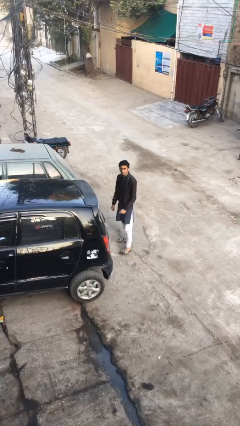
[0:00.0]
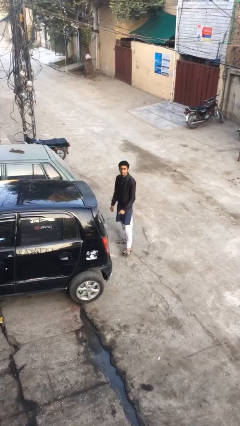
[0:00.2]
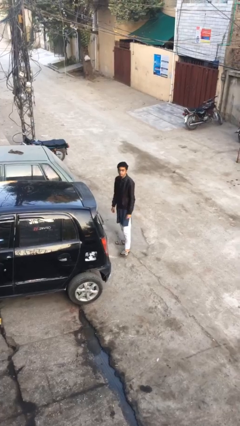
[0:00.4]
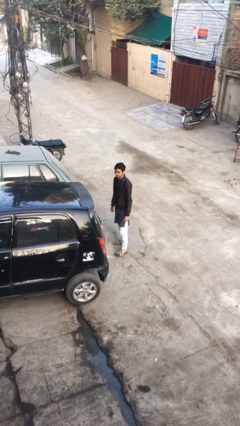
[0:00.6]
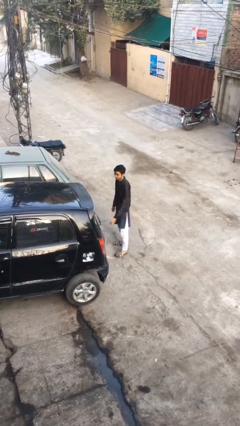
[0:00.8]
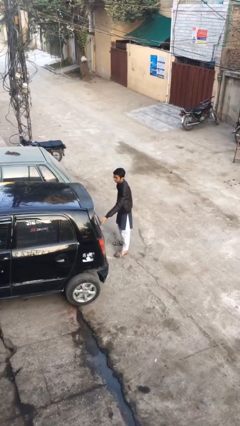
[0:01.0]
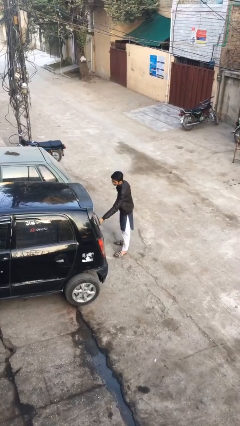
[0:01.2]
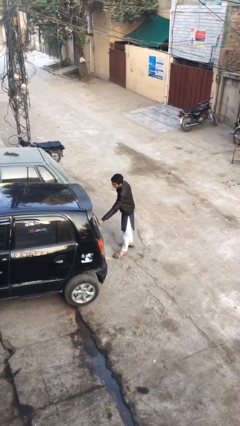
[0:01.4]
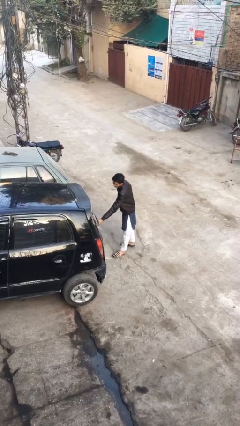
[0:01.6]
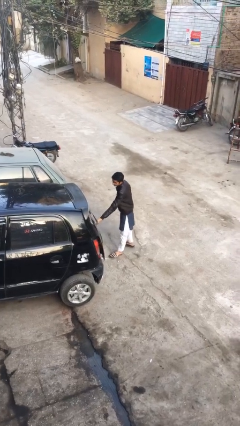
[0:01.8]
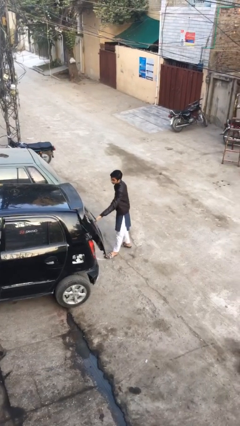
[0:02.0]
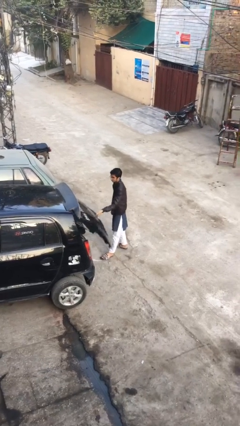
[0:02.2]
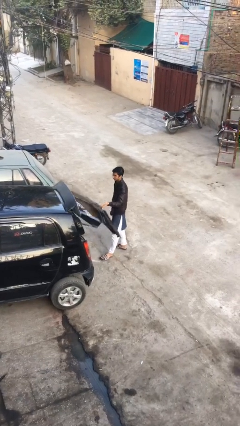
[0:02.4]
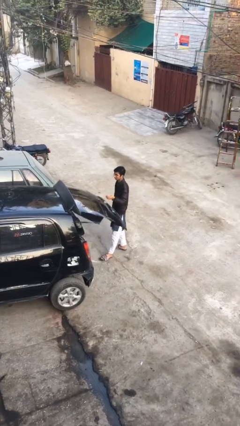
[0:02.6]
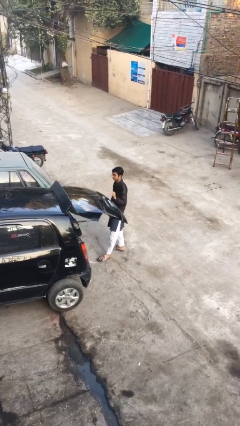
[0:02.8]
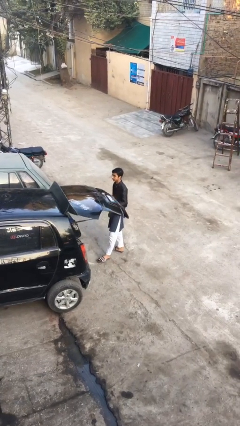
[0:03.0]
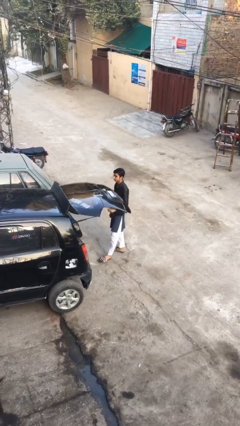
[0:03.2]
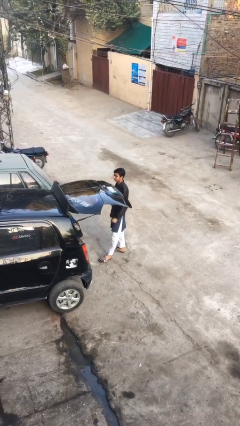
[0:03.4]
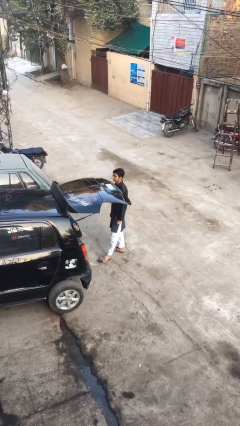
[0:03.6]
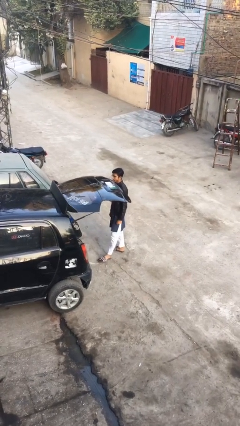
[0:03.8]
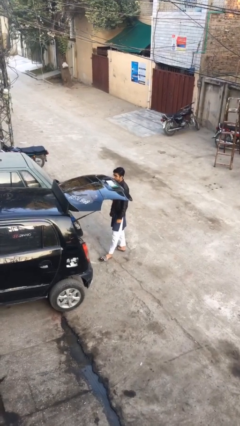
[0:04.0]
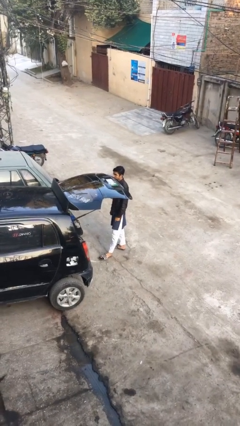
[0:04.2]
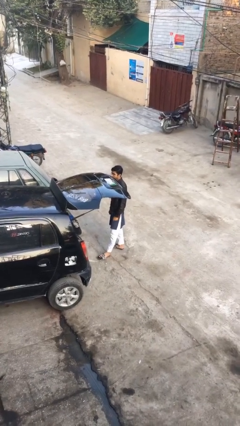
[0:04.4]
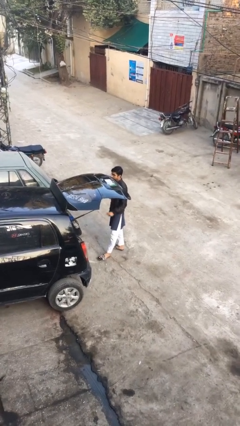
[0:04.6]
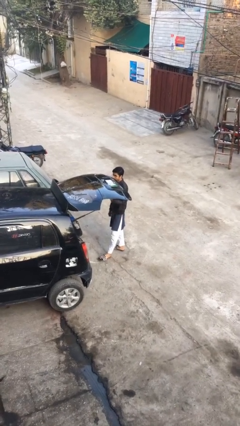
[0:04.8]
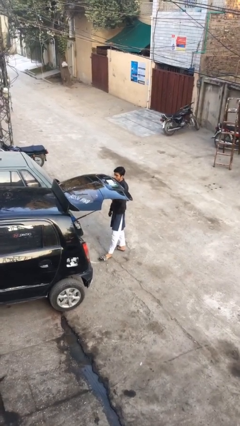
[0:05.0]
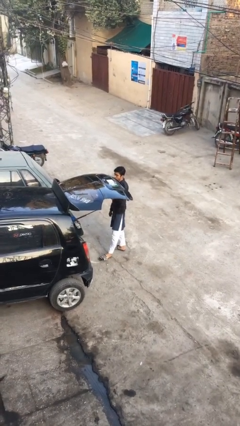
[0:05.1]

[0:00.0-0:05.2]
person opens car trunk

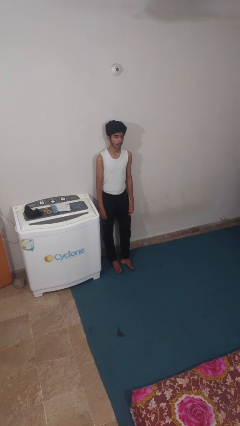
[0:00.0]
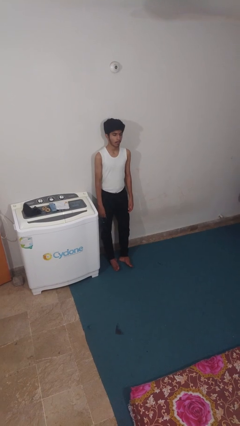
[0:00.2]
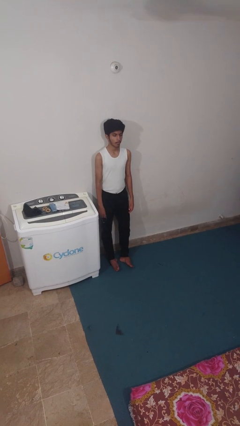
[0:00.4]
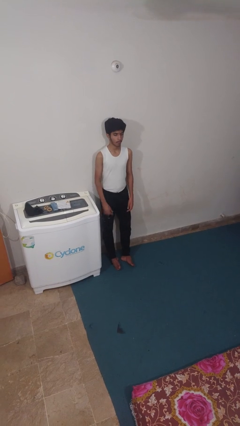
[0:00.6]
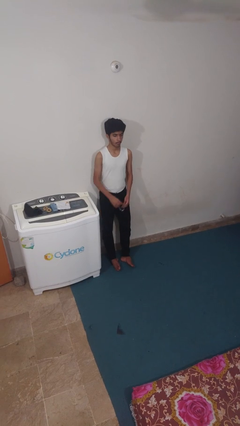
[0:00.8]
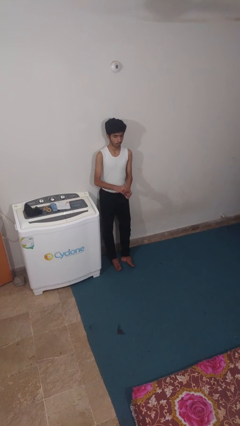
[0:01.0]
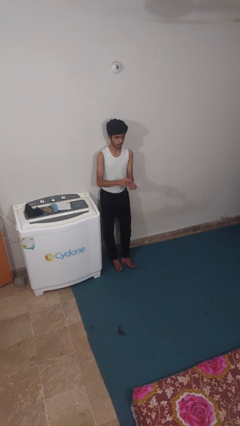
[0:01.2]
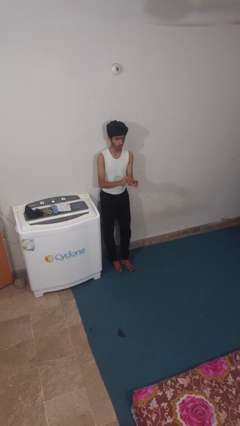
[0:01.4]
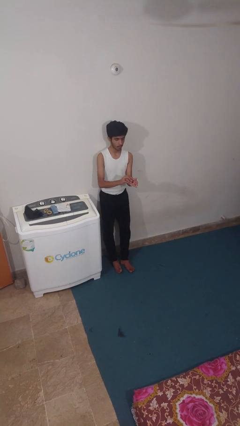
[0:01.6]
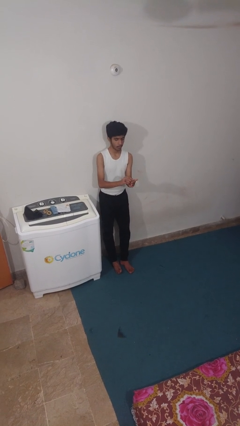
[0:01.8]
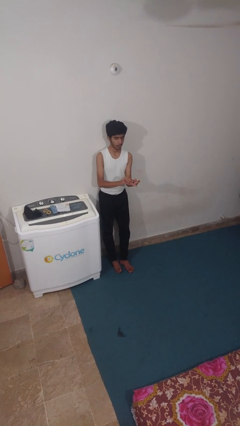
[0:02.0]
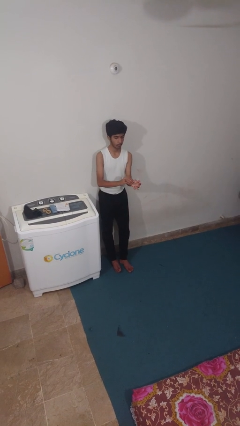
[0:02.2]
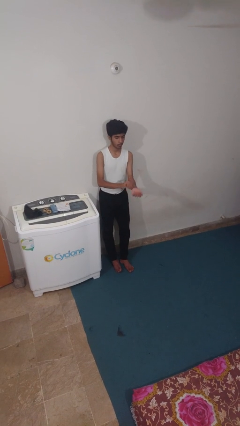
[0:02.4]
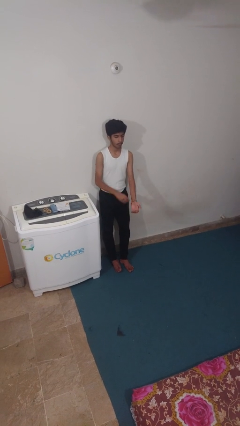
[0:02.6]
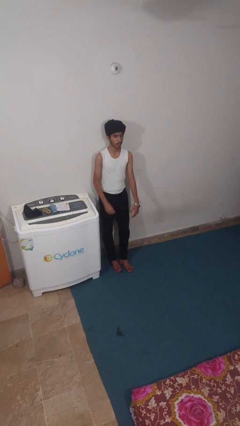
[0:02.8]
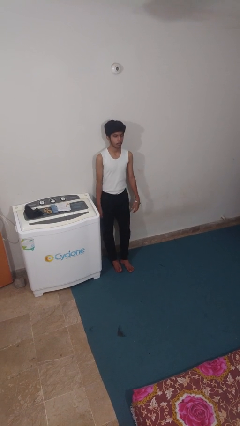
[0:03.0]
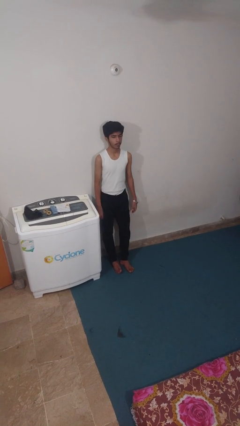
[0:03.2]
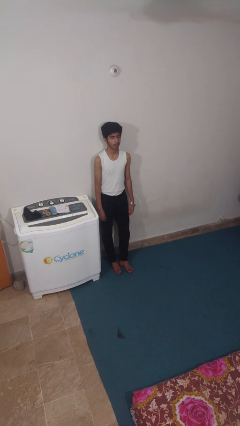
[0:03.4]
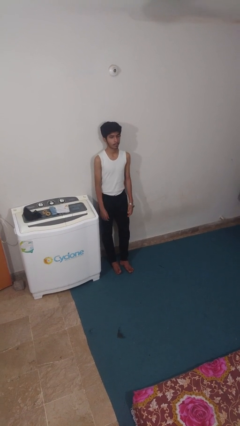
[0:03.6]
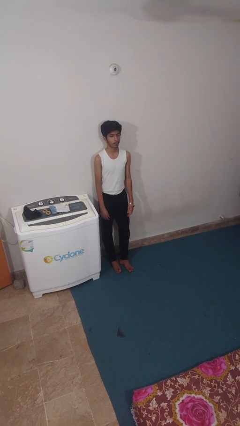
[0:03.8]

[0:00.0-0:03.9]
person puts on wristwatch

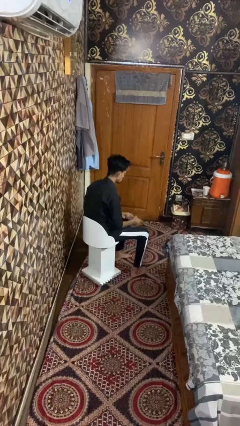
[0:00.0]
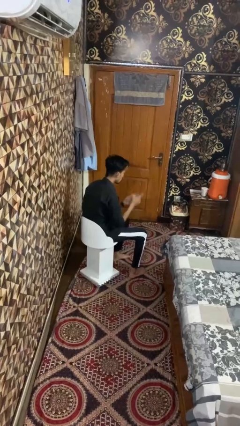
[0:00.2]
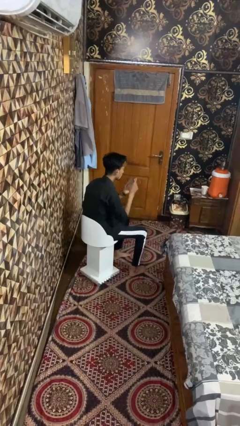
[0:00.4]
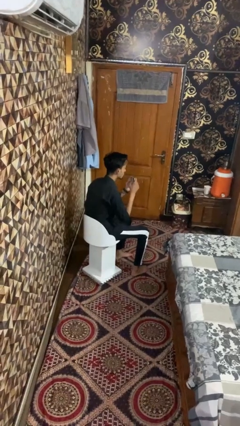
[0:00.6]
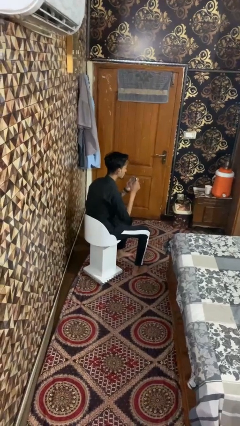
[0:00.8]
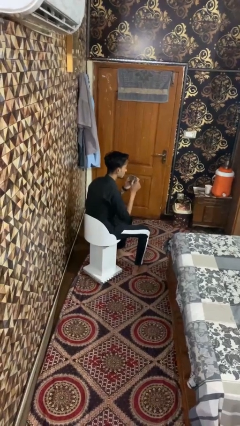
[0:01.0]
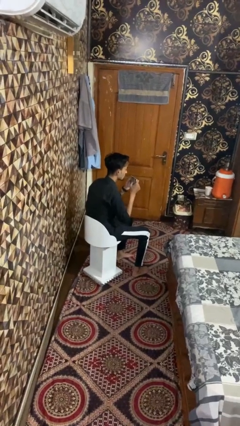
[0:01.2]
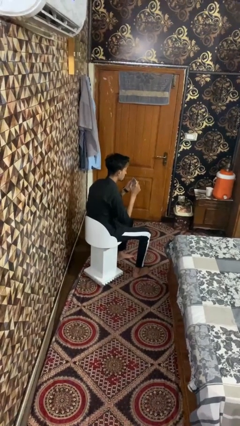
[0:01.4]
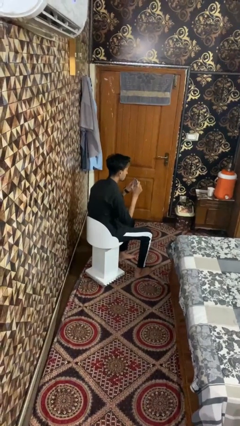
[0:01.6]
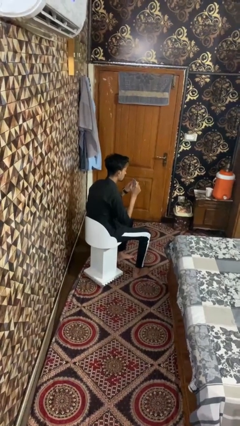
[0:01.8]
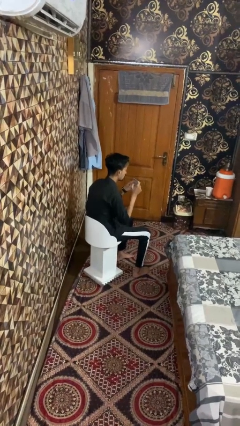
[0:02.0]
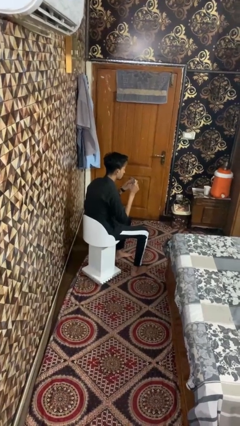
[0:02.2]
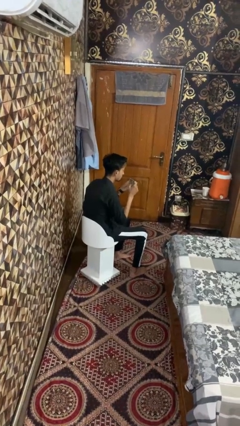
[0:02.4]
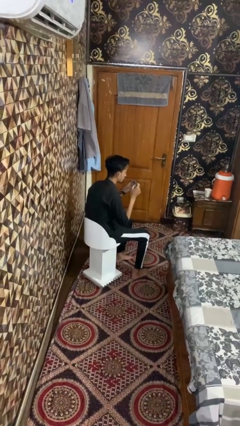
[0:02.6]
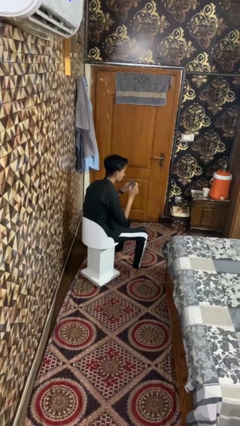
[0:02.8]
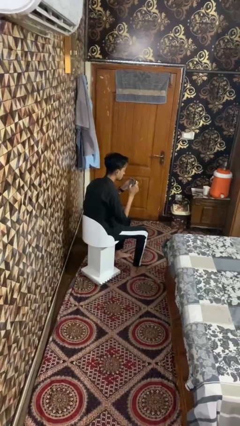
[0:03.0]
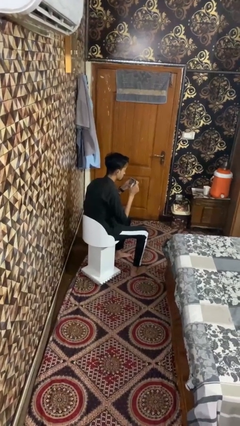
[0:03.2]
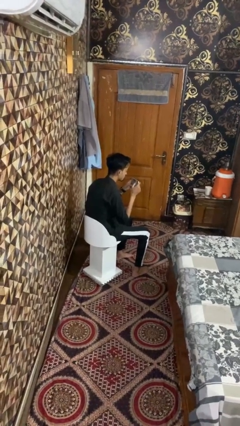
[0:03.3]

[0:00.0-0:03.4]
person interacts with tablet

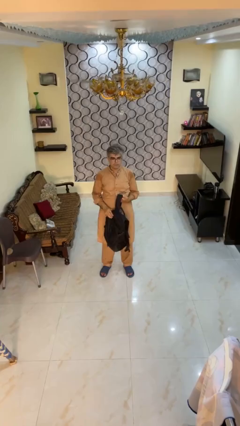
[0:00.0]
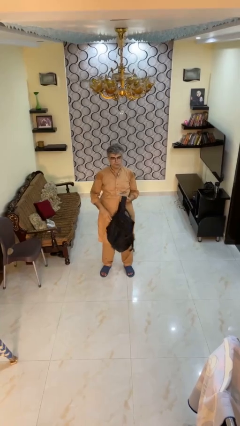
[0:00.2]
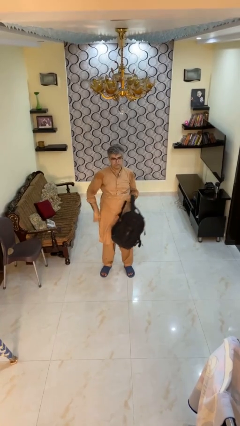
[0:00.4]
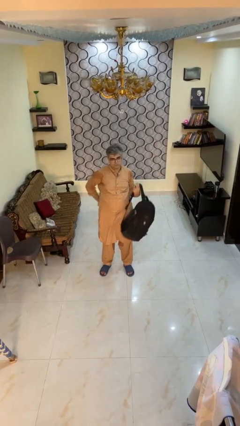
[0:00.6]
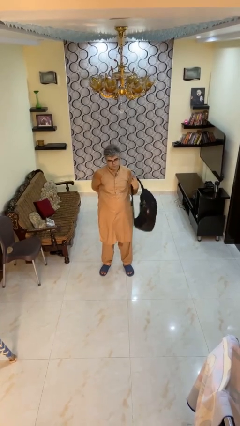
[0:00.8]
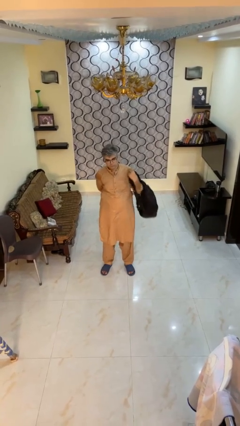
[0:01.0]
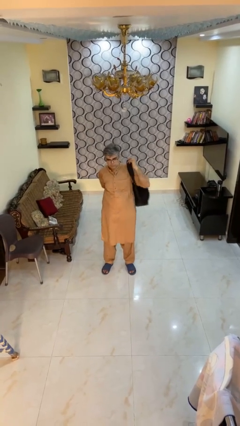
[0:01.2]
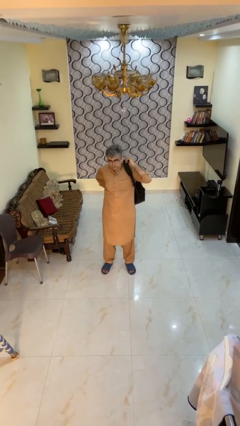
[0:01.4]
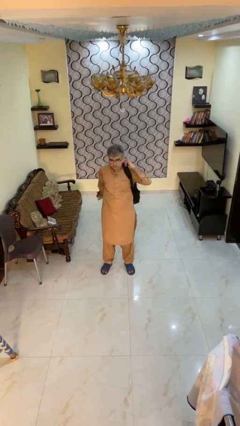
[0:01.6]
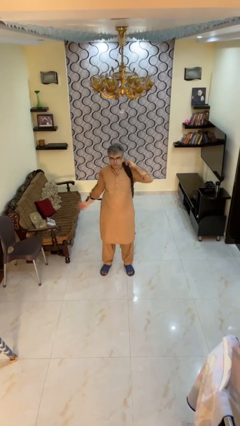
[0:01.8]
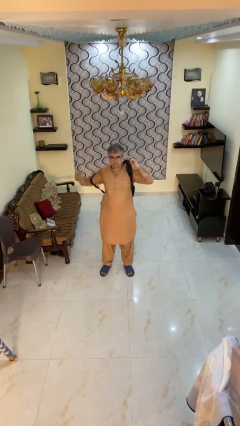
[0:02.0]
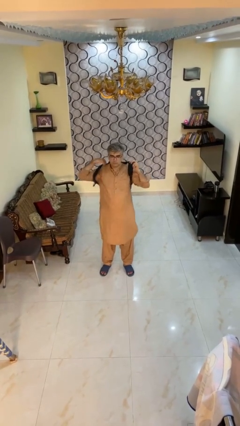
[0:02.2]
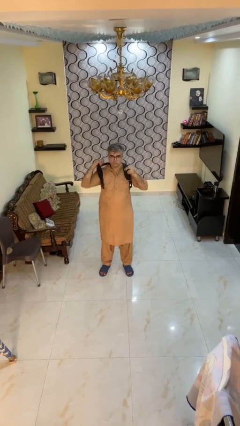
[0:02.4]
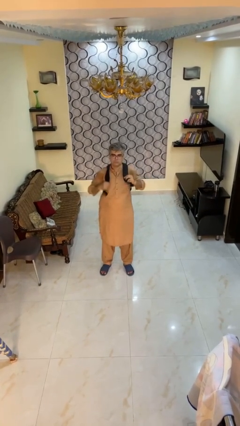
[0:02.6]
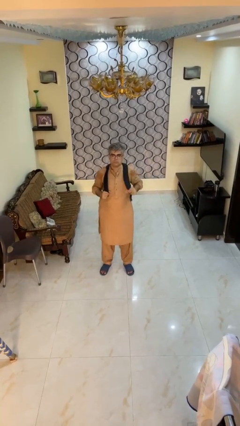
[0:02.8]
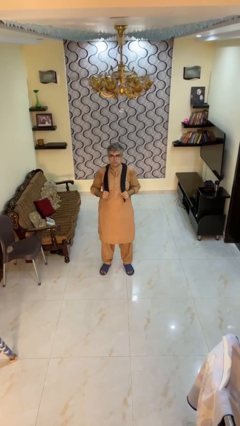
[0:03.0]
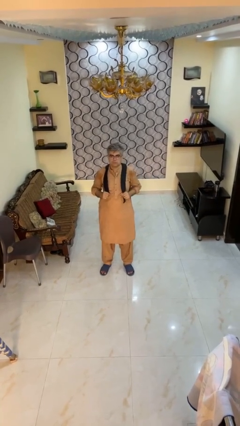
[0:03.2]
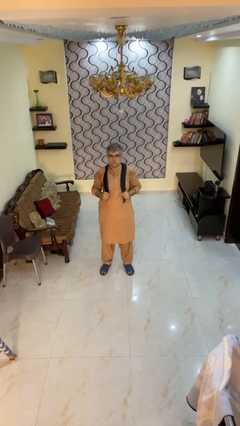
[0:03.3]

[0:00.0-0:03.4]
person puts on backpack

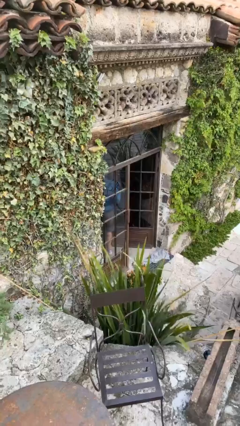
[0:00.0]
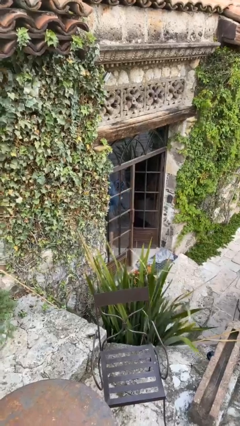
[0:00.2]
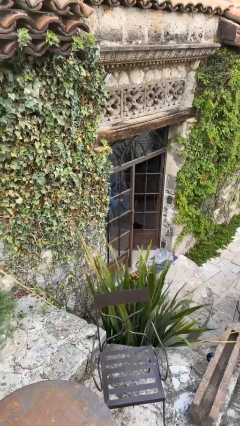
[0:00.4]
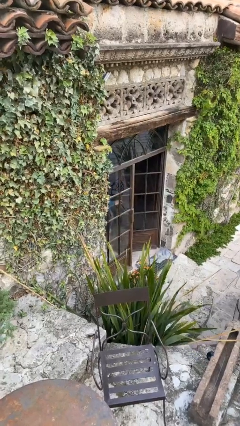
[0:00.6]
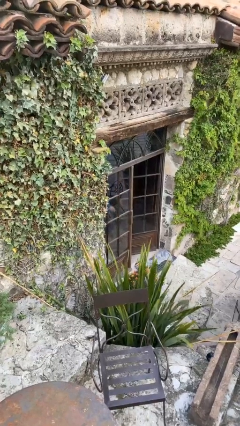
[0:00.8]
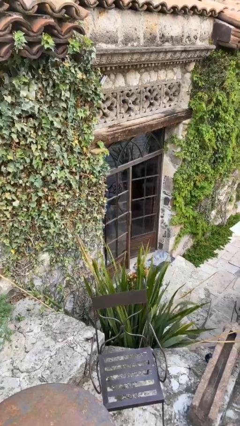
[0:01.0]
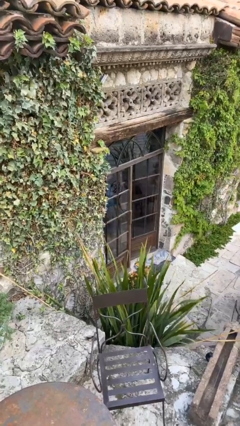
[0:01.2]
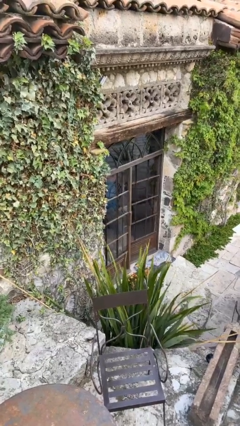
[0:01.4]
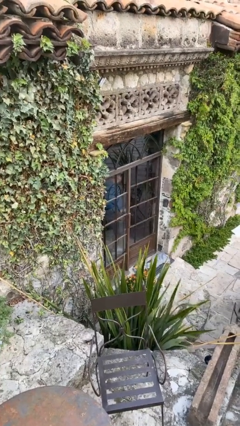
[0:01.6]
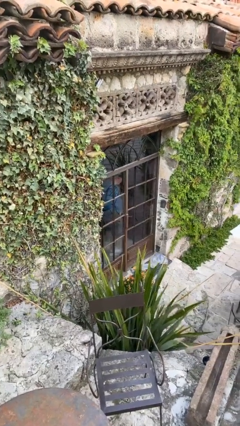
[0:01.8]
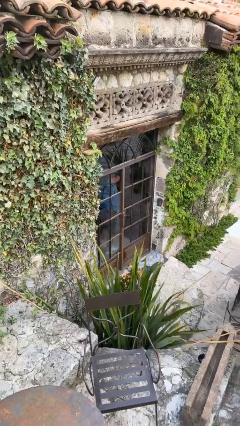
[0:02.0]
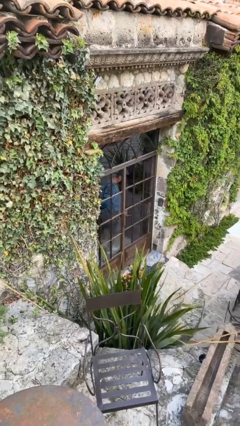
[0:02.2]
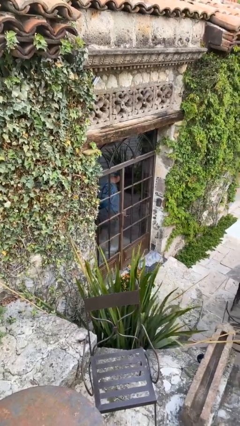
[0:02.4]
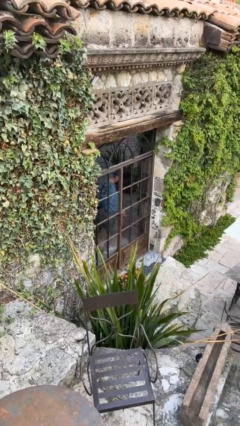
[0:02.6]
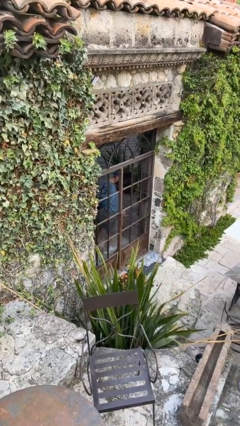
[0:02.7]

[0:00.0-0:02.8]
person closes facility door
